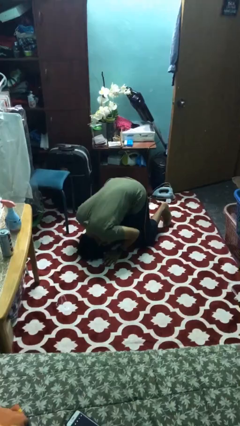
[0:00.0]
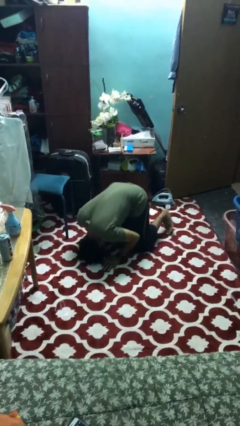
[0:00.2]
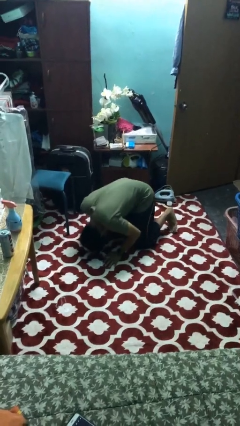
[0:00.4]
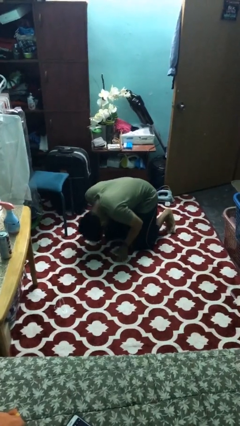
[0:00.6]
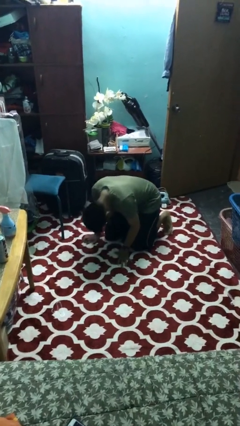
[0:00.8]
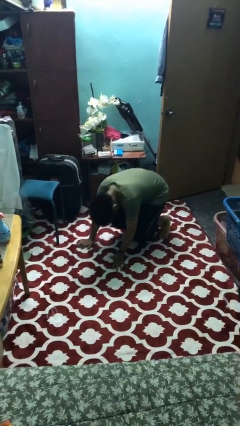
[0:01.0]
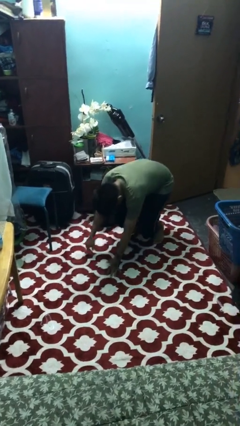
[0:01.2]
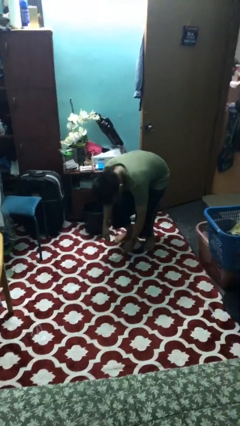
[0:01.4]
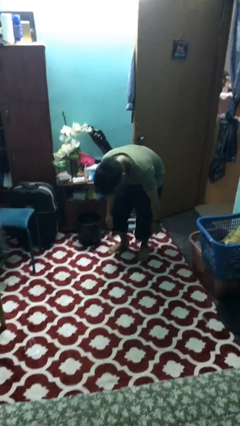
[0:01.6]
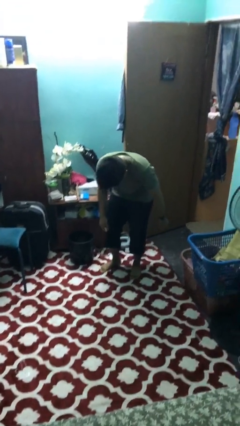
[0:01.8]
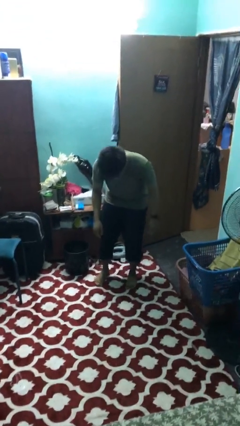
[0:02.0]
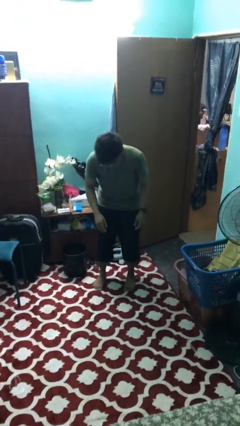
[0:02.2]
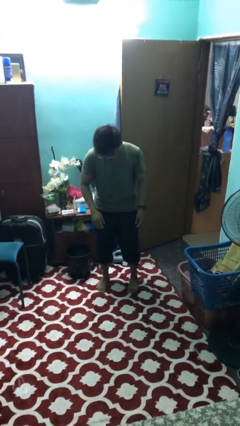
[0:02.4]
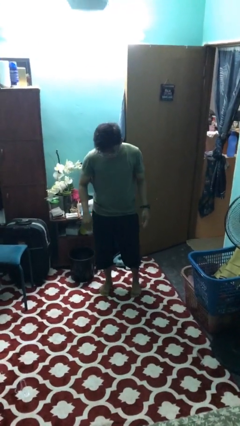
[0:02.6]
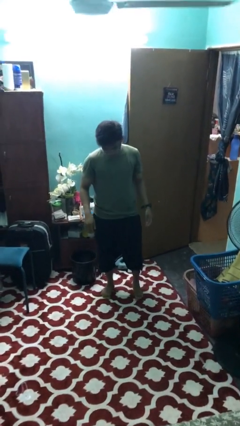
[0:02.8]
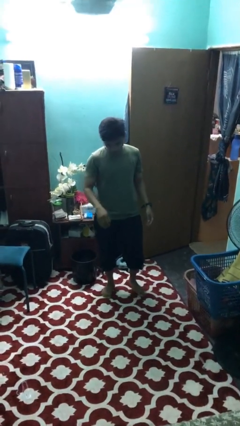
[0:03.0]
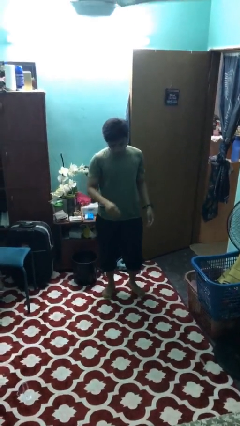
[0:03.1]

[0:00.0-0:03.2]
person stands up from floor

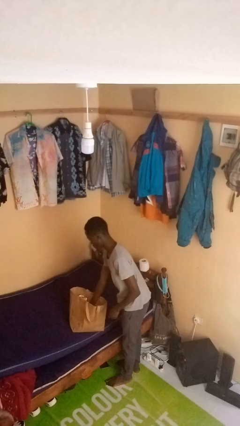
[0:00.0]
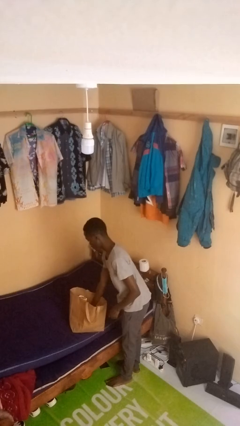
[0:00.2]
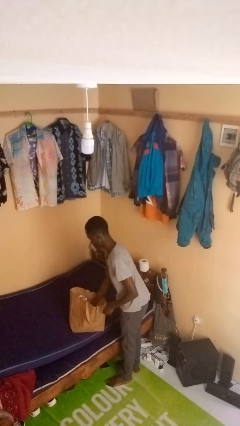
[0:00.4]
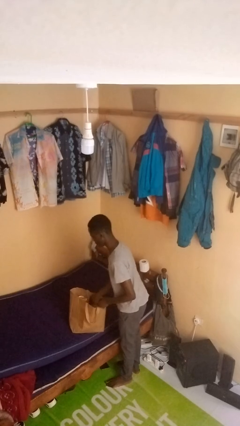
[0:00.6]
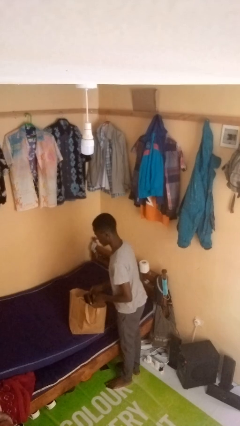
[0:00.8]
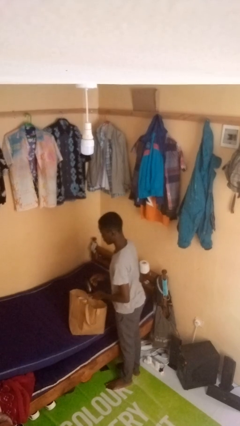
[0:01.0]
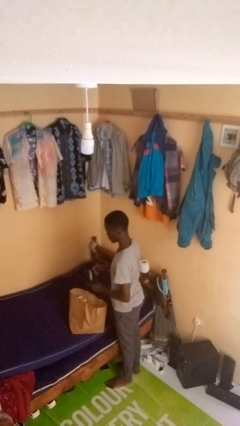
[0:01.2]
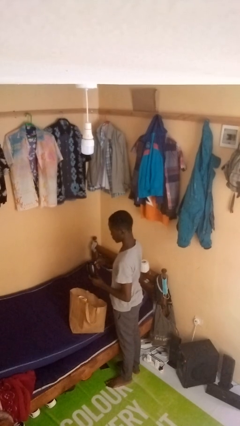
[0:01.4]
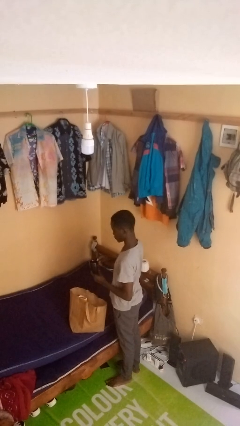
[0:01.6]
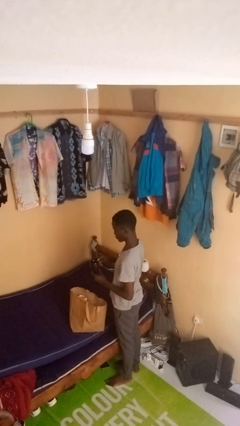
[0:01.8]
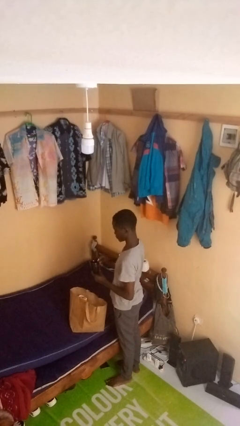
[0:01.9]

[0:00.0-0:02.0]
person takes object from bag

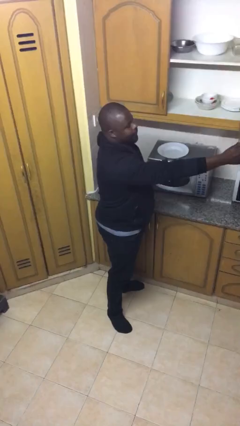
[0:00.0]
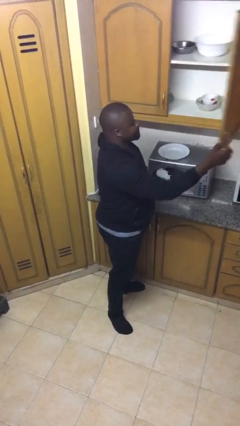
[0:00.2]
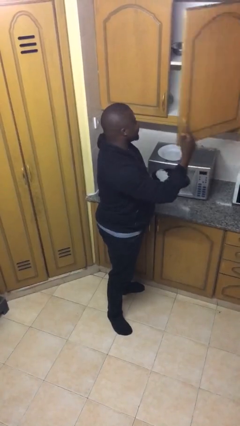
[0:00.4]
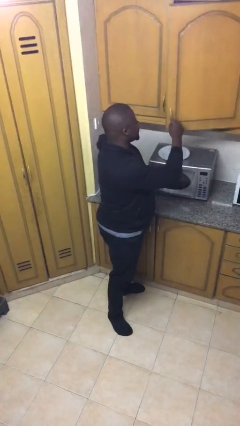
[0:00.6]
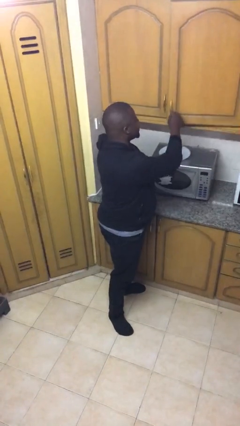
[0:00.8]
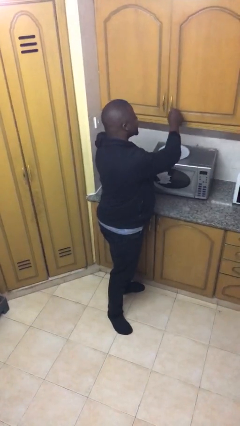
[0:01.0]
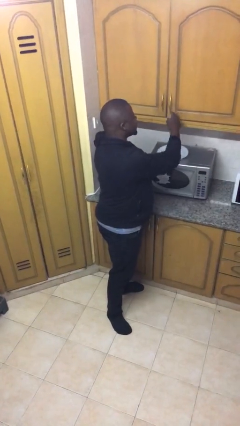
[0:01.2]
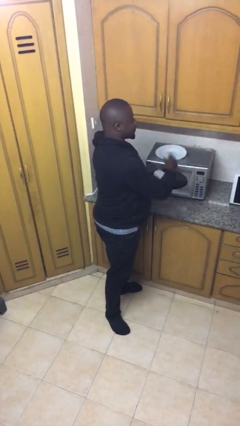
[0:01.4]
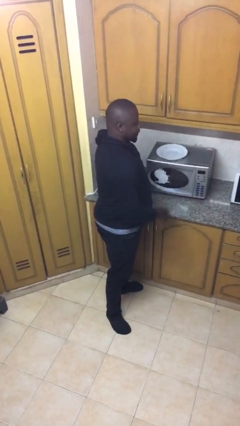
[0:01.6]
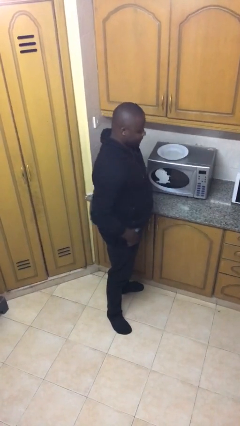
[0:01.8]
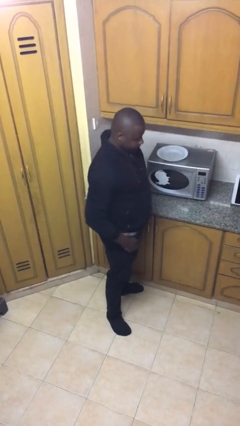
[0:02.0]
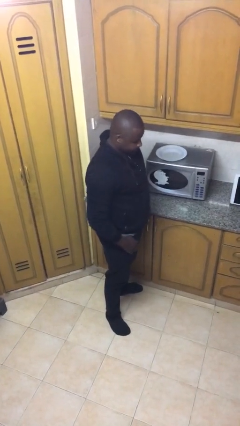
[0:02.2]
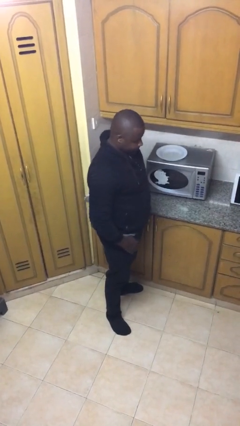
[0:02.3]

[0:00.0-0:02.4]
person closes cabinet

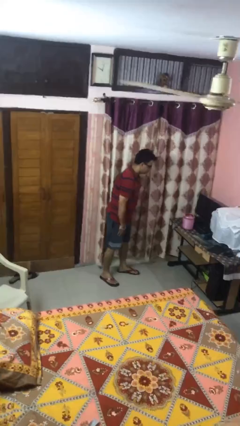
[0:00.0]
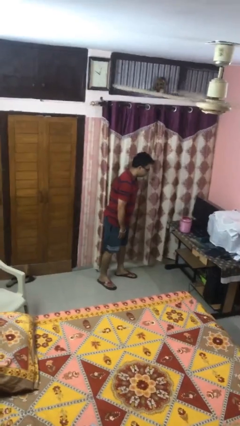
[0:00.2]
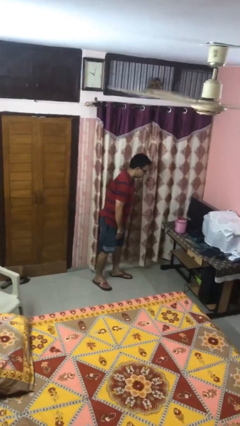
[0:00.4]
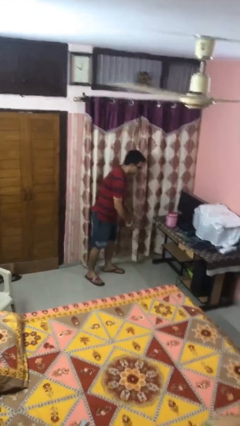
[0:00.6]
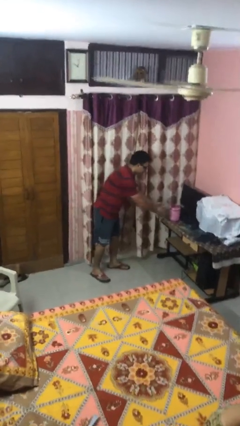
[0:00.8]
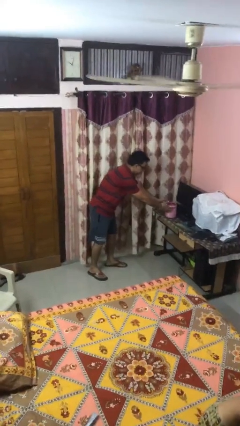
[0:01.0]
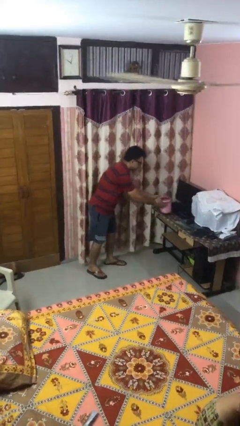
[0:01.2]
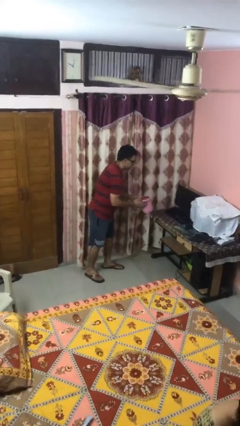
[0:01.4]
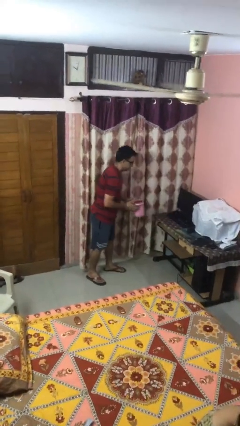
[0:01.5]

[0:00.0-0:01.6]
person picks up object from countertop

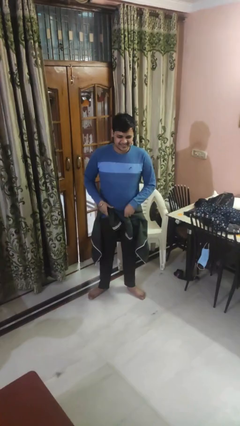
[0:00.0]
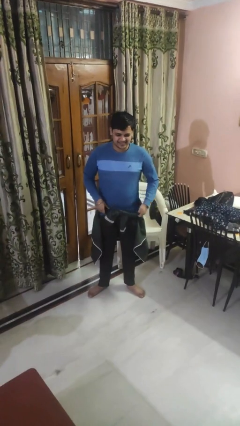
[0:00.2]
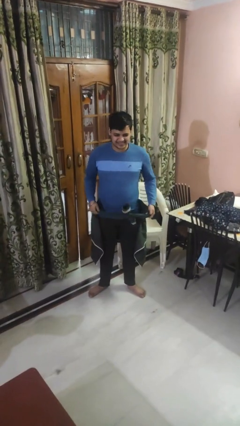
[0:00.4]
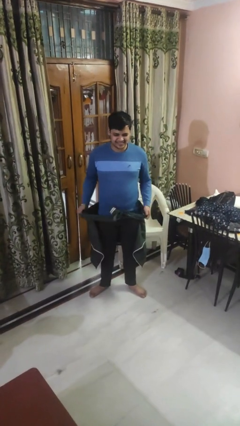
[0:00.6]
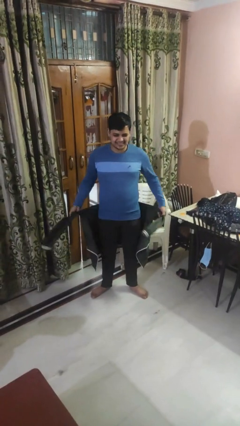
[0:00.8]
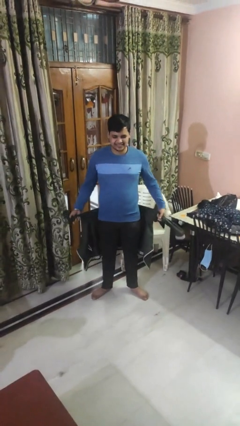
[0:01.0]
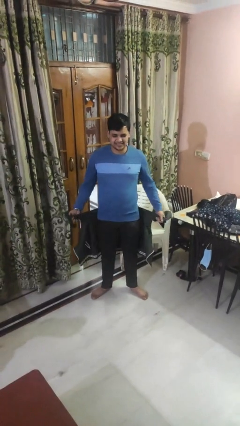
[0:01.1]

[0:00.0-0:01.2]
person unties jacket around waist

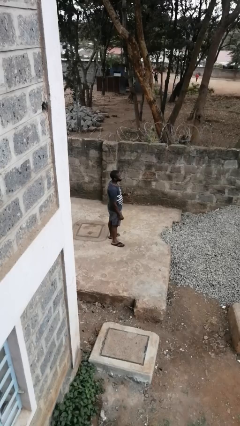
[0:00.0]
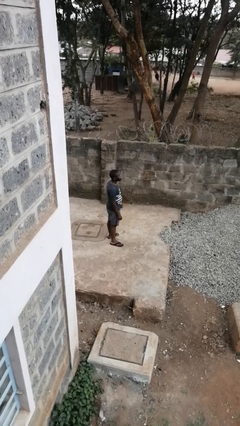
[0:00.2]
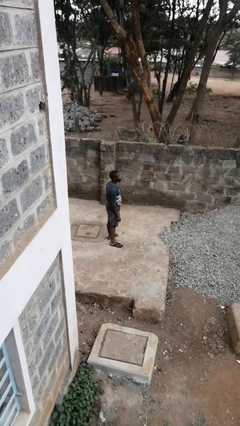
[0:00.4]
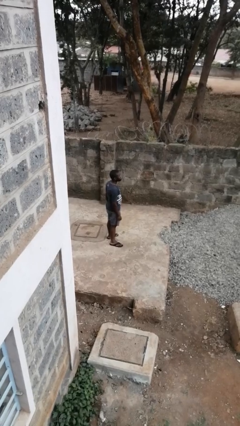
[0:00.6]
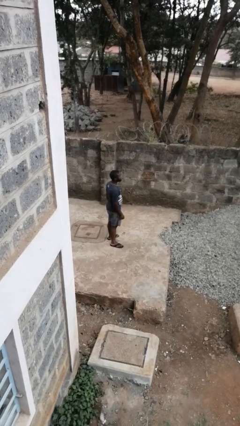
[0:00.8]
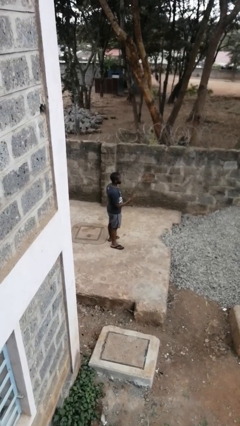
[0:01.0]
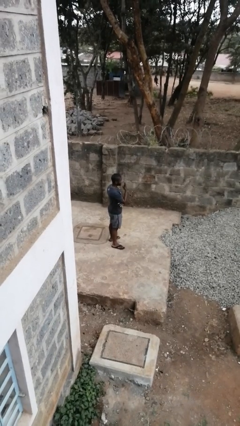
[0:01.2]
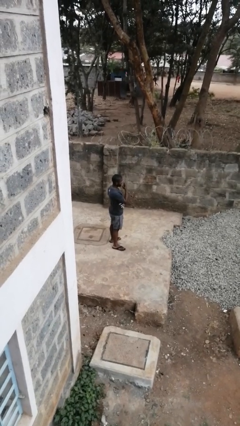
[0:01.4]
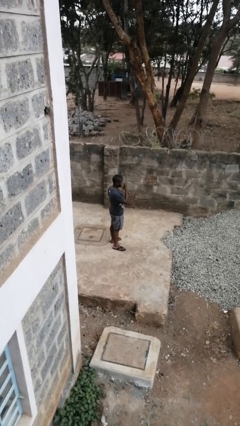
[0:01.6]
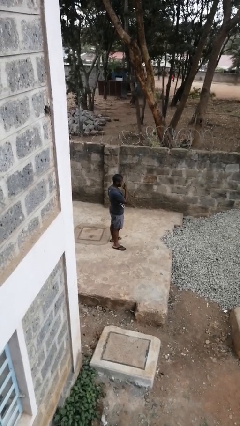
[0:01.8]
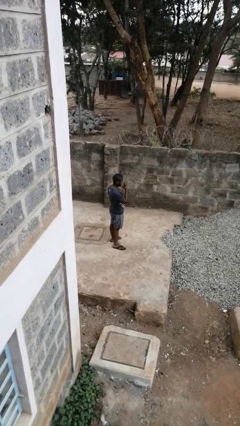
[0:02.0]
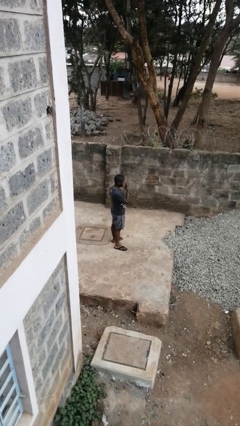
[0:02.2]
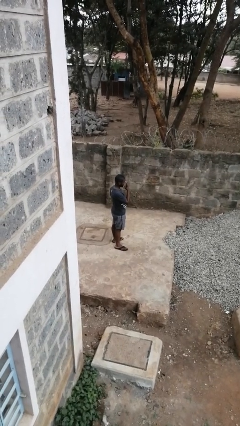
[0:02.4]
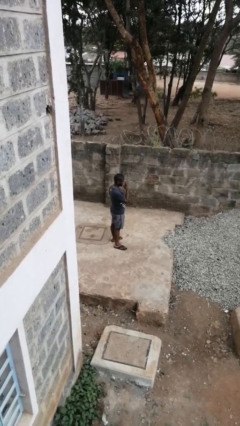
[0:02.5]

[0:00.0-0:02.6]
person gestures watch closely

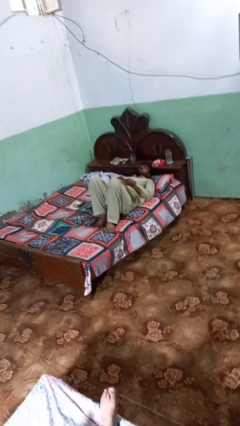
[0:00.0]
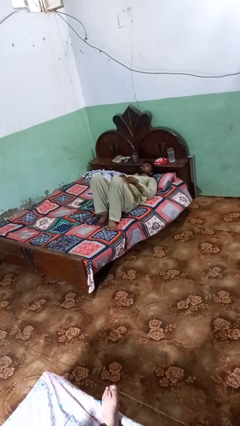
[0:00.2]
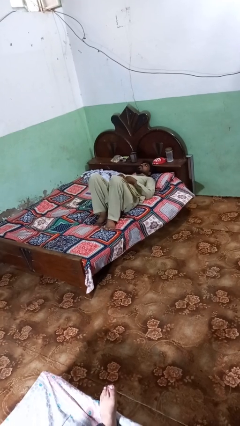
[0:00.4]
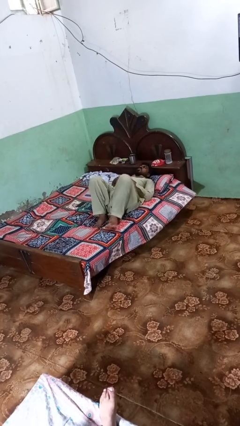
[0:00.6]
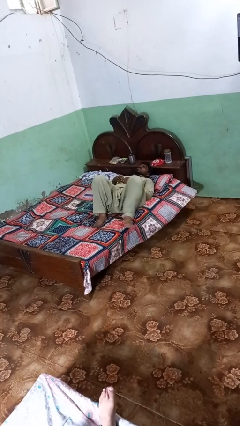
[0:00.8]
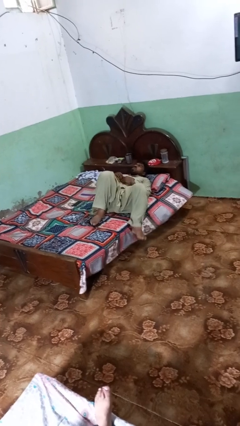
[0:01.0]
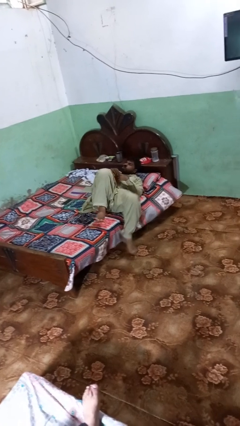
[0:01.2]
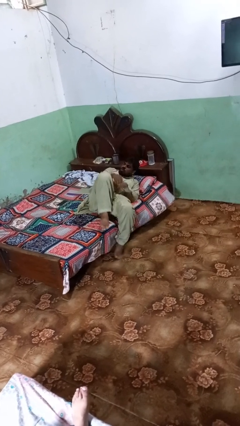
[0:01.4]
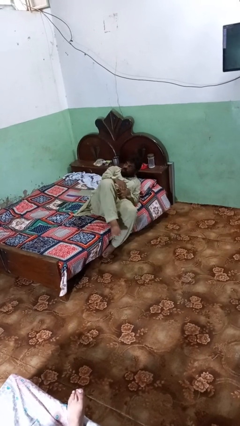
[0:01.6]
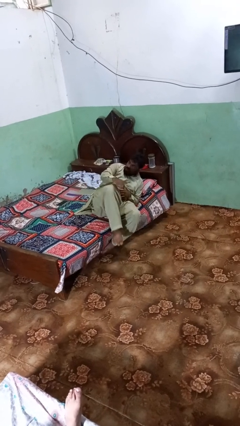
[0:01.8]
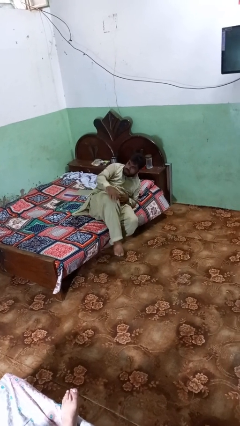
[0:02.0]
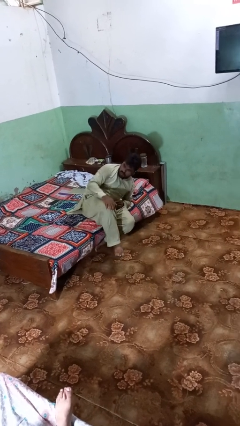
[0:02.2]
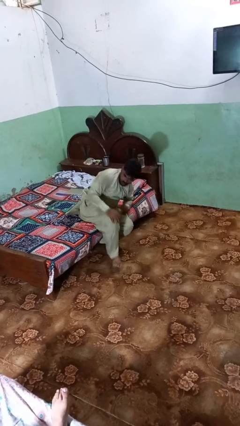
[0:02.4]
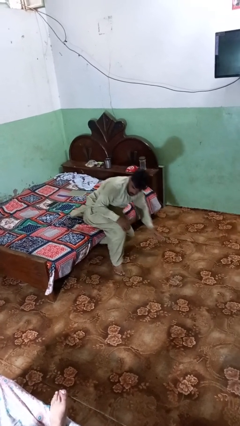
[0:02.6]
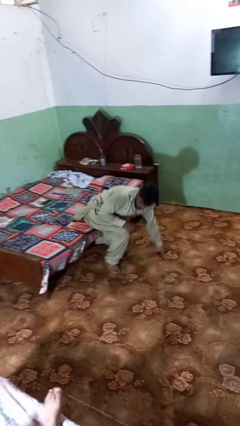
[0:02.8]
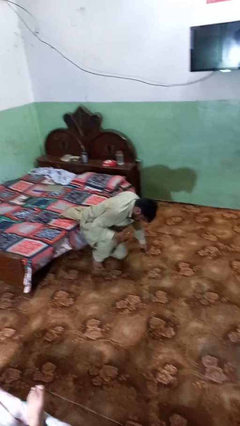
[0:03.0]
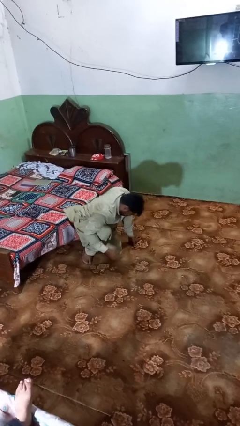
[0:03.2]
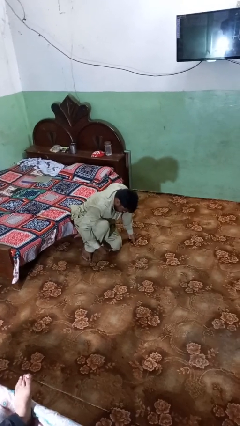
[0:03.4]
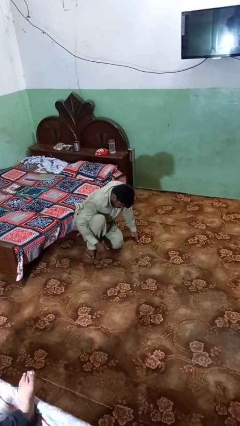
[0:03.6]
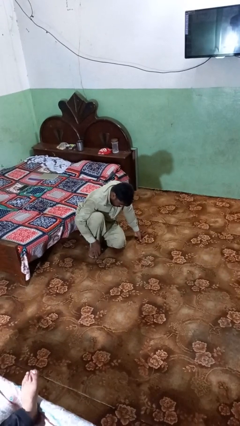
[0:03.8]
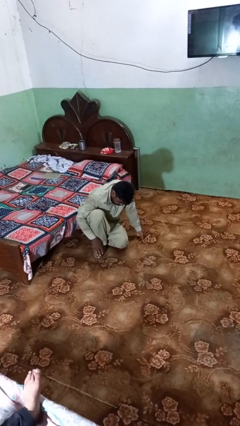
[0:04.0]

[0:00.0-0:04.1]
person falls from bed
